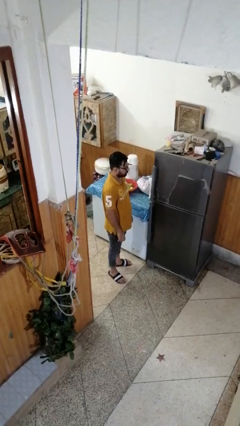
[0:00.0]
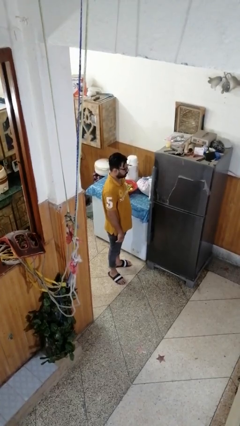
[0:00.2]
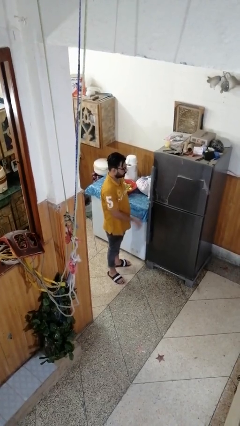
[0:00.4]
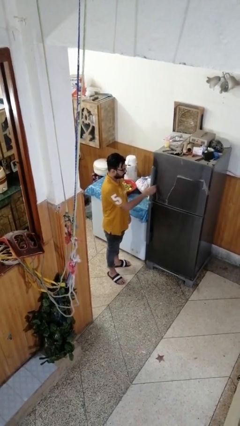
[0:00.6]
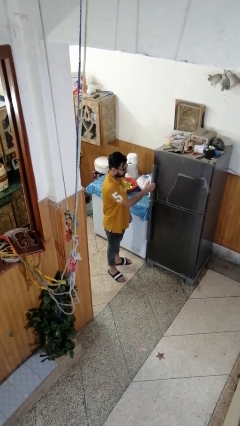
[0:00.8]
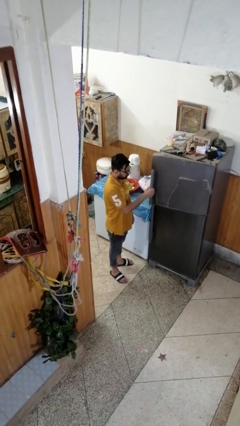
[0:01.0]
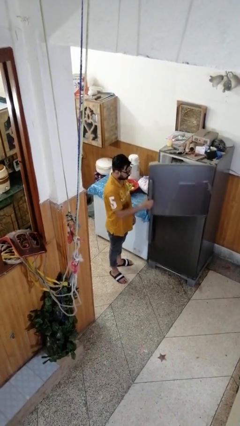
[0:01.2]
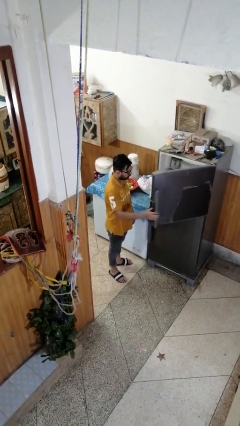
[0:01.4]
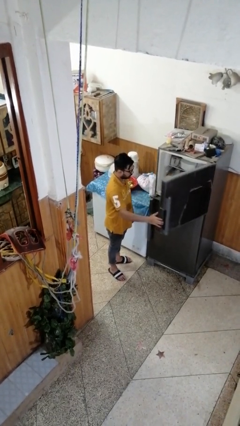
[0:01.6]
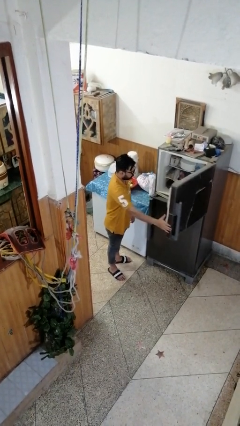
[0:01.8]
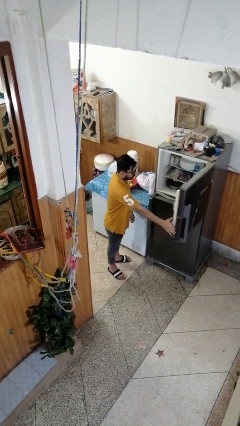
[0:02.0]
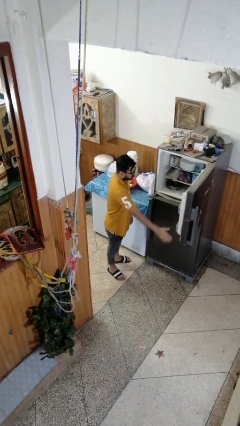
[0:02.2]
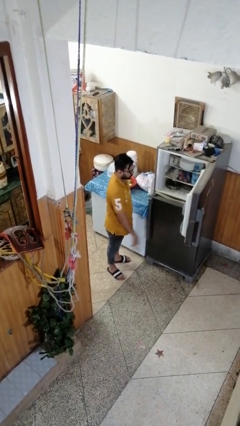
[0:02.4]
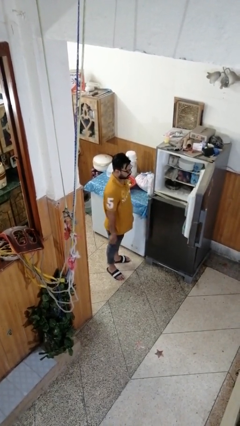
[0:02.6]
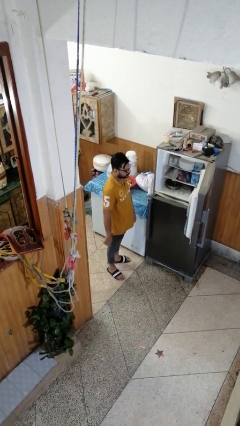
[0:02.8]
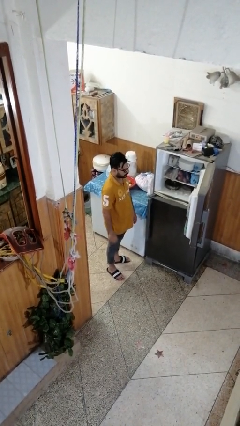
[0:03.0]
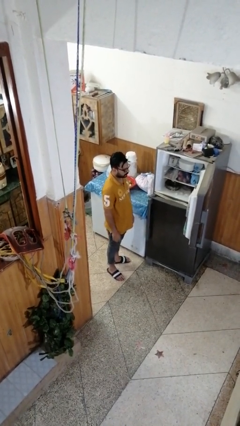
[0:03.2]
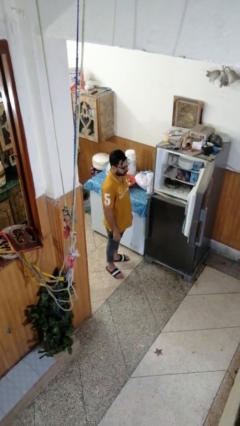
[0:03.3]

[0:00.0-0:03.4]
person opens refrigerator

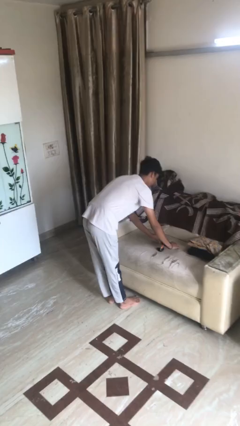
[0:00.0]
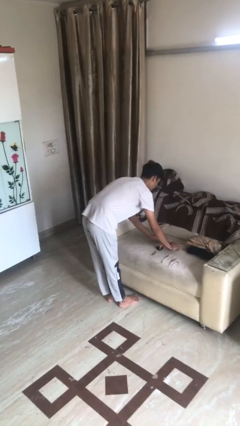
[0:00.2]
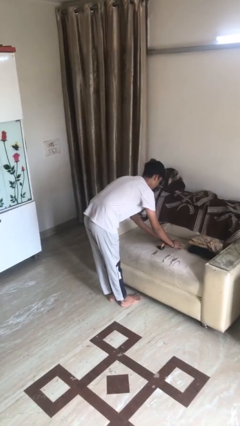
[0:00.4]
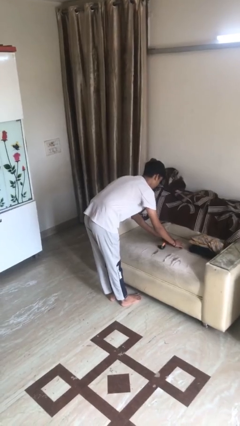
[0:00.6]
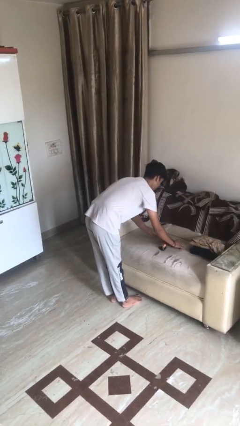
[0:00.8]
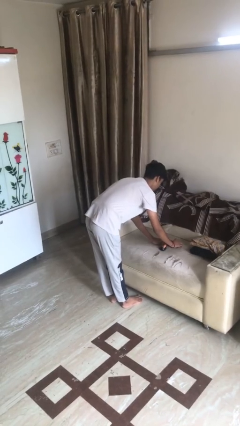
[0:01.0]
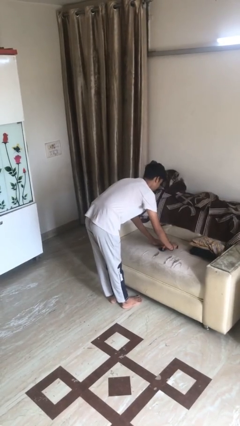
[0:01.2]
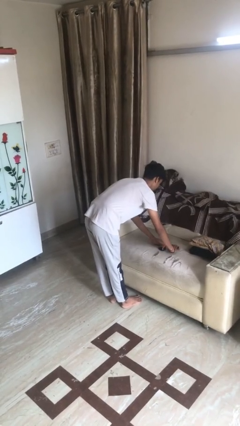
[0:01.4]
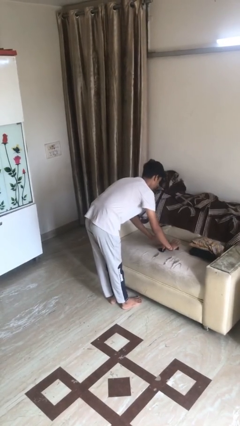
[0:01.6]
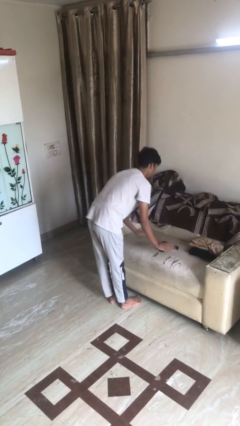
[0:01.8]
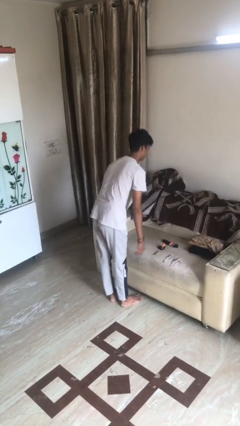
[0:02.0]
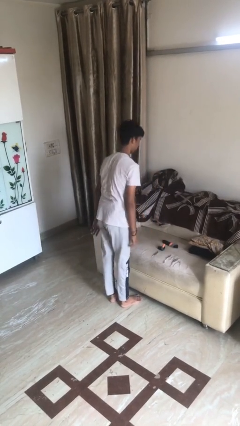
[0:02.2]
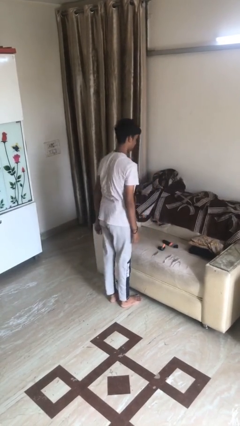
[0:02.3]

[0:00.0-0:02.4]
person folds socks

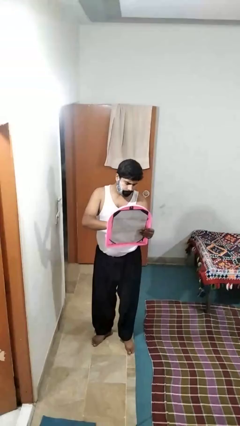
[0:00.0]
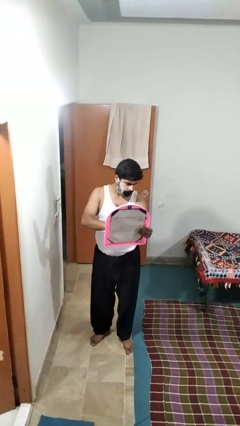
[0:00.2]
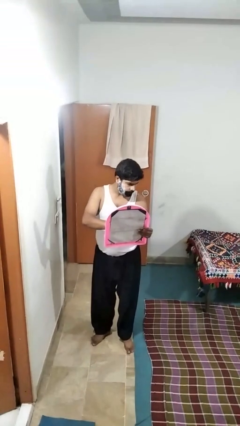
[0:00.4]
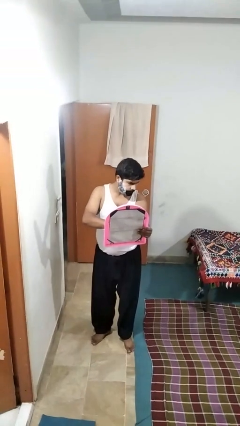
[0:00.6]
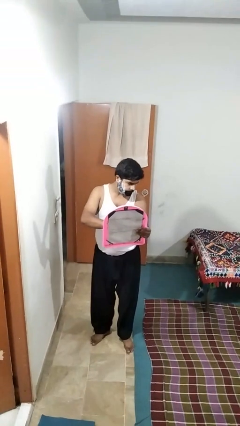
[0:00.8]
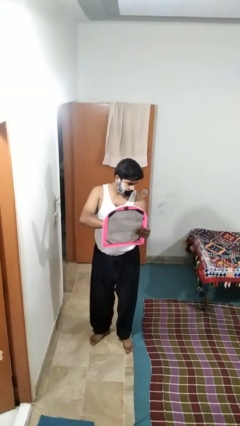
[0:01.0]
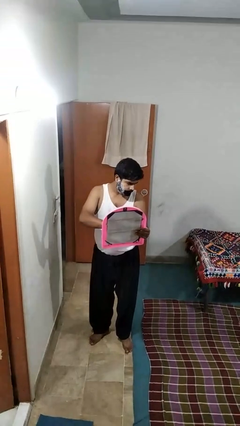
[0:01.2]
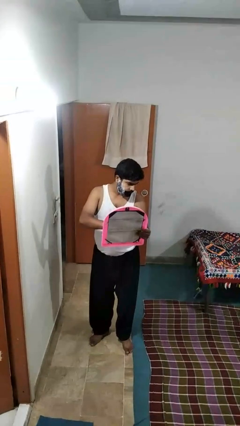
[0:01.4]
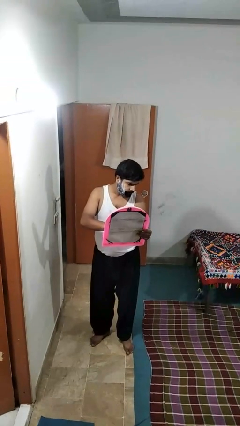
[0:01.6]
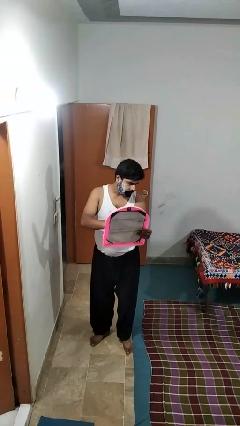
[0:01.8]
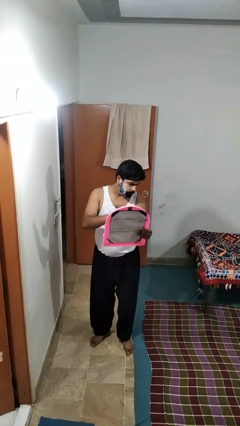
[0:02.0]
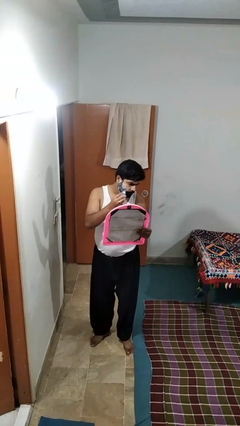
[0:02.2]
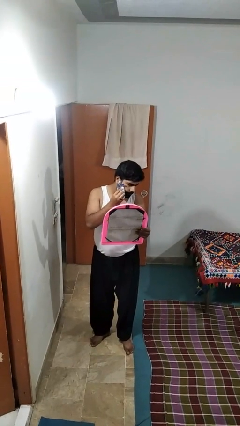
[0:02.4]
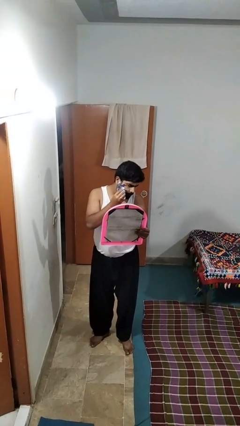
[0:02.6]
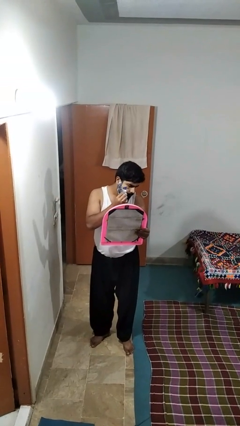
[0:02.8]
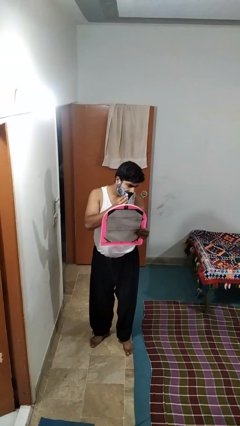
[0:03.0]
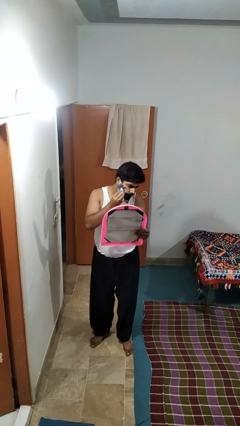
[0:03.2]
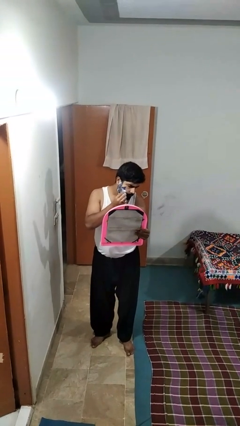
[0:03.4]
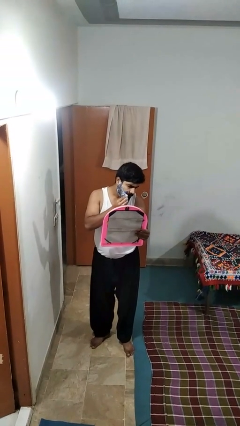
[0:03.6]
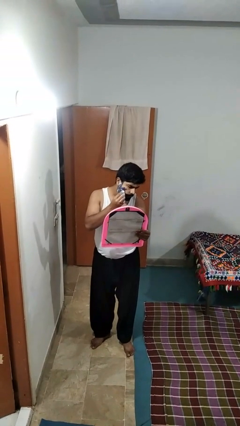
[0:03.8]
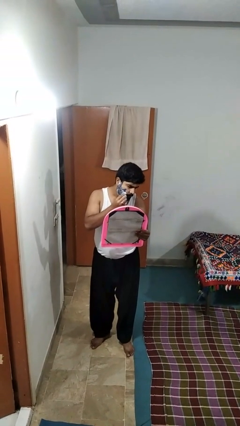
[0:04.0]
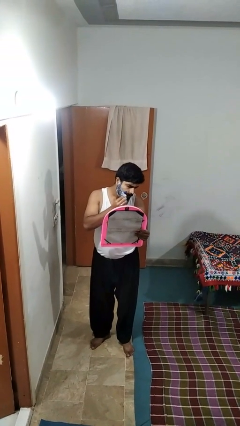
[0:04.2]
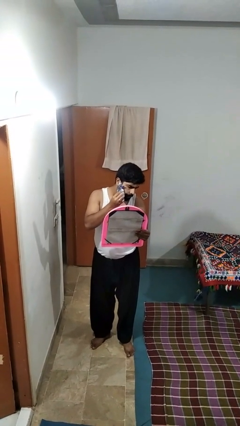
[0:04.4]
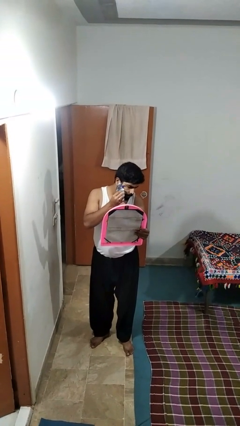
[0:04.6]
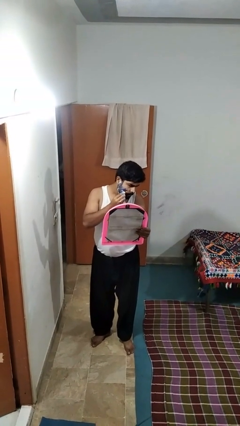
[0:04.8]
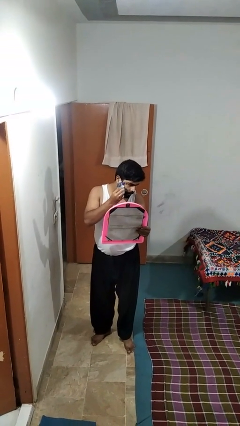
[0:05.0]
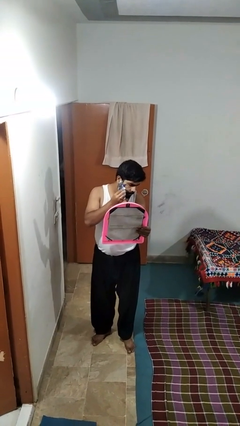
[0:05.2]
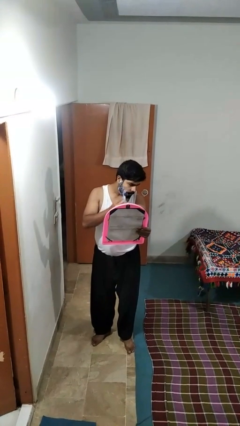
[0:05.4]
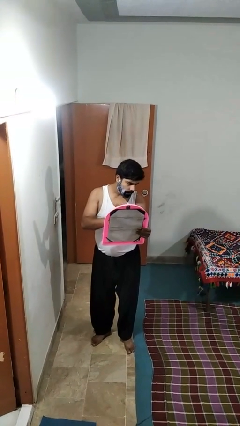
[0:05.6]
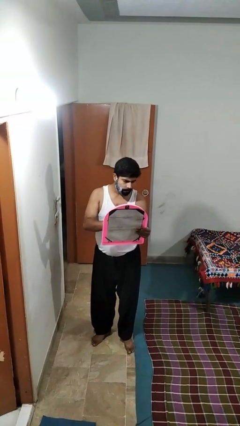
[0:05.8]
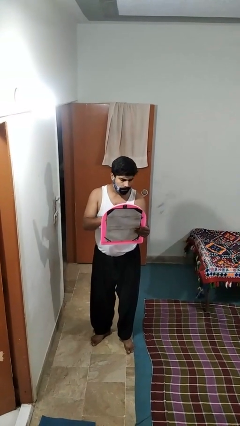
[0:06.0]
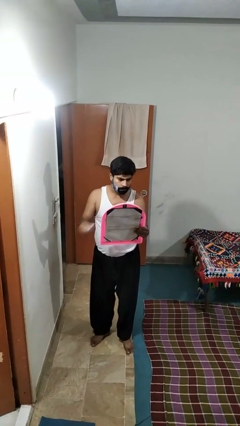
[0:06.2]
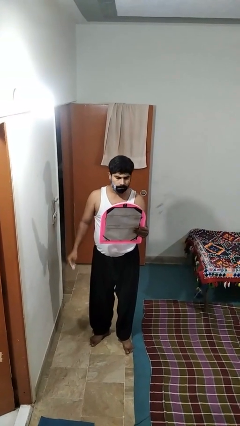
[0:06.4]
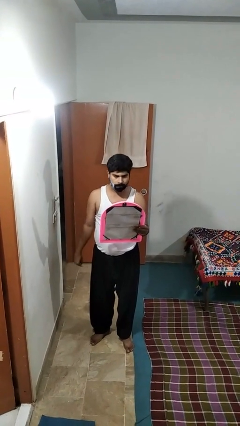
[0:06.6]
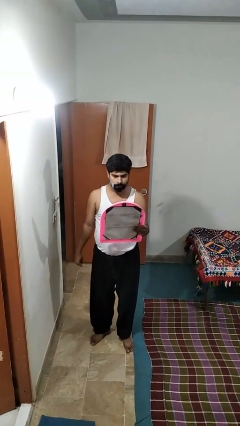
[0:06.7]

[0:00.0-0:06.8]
person shaves face

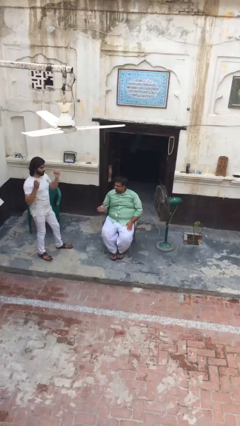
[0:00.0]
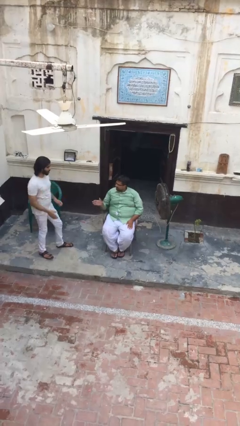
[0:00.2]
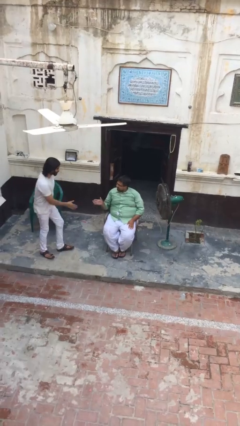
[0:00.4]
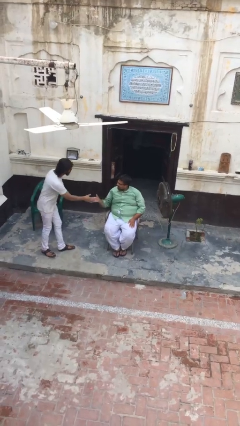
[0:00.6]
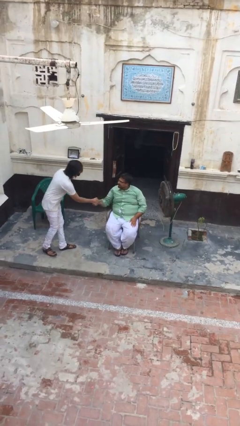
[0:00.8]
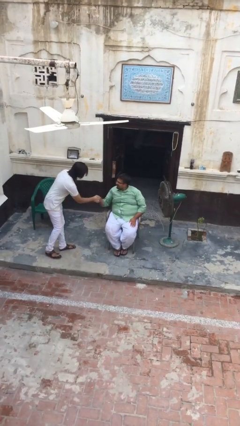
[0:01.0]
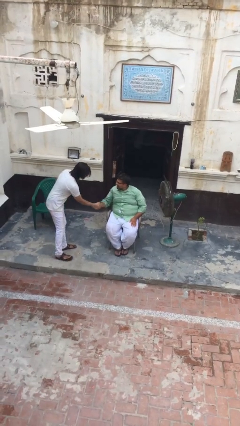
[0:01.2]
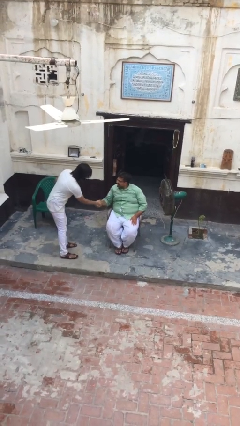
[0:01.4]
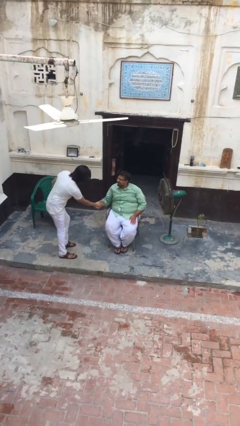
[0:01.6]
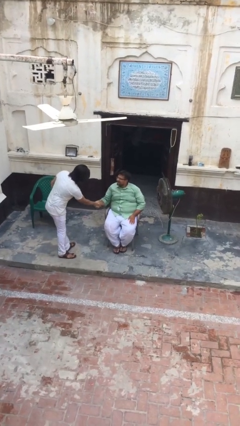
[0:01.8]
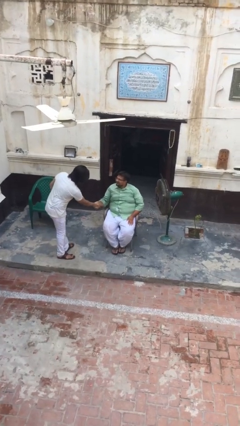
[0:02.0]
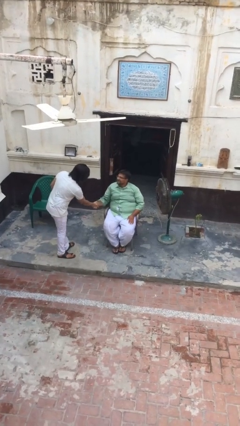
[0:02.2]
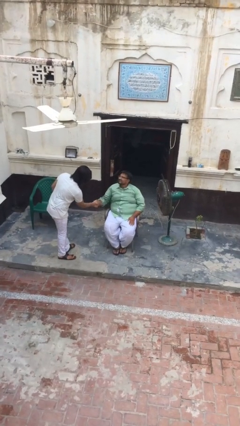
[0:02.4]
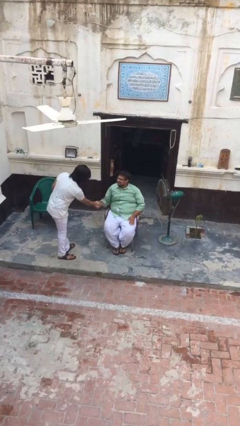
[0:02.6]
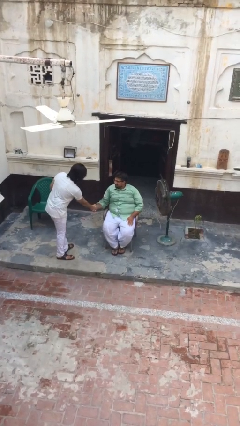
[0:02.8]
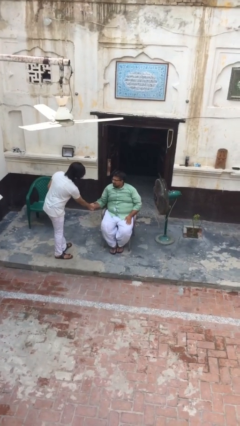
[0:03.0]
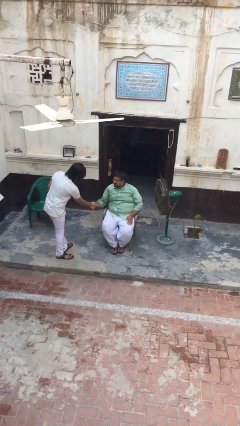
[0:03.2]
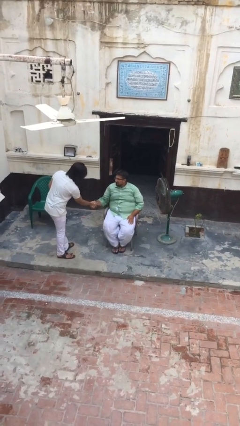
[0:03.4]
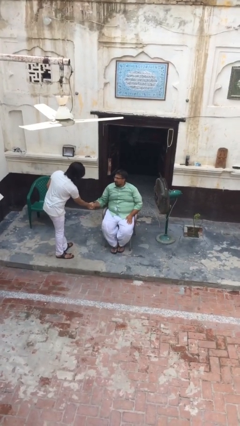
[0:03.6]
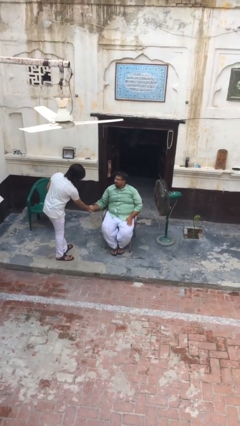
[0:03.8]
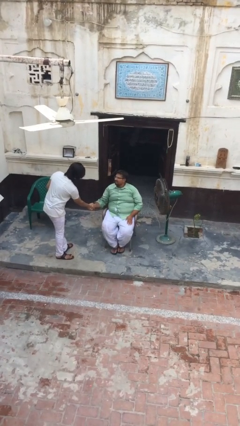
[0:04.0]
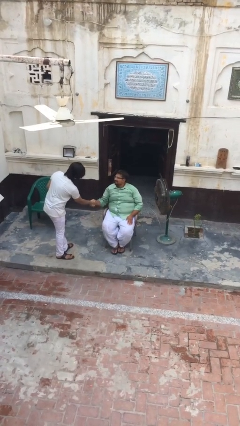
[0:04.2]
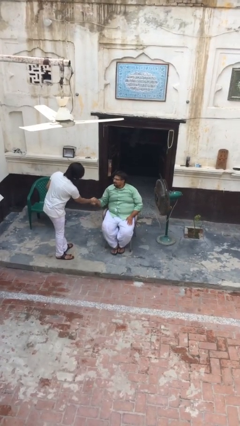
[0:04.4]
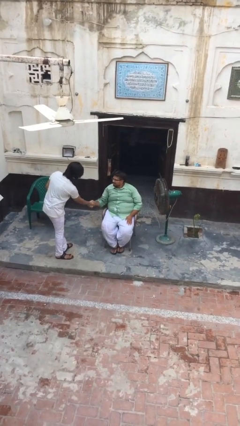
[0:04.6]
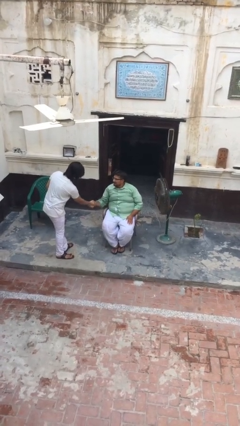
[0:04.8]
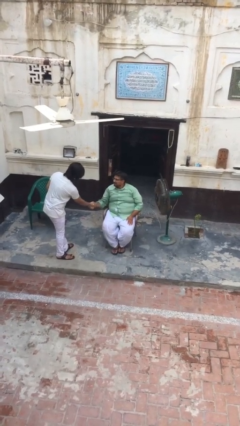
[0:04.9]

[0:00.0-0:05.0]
person shakes hand

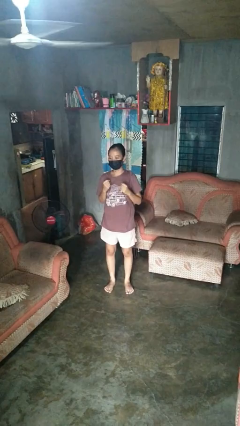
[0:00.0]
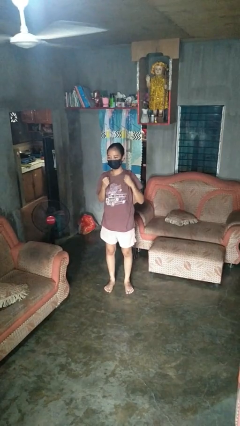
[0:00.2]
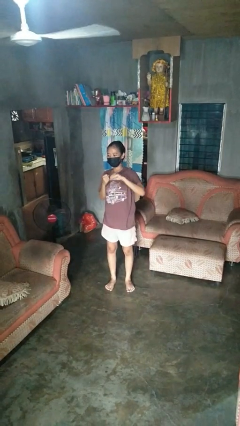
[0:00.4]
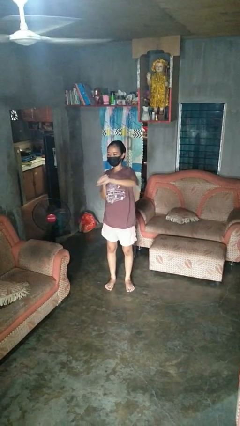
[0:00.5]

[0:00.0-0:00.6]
person punches
